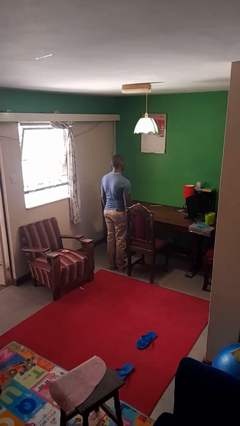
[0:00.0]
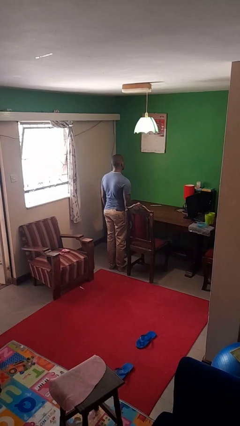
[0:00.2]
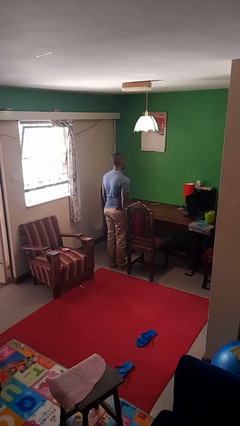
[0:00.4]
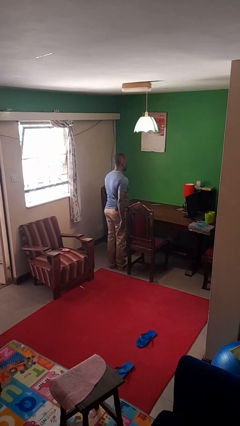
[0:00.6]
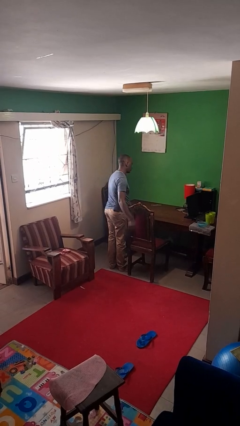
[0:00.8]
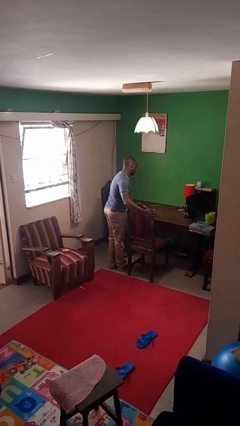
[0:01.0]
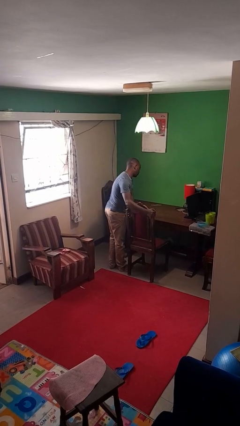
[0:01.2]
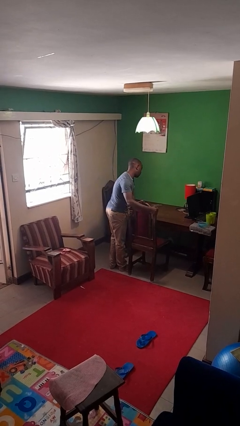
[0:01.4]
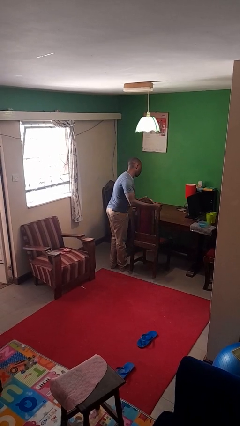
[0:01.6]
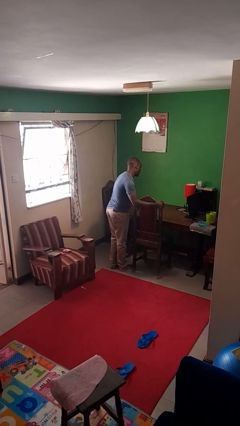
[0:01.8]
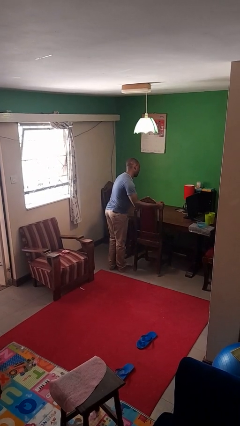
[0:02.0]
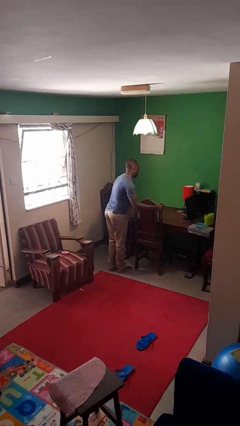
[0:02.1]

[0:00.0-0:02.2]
person pushes in chair

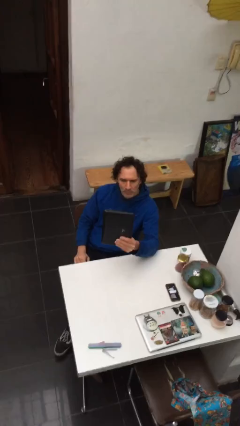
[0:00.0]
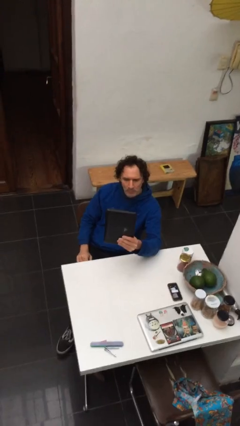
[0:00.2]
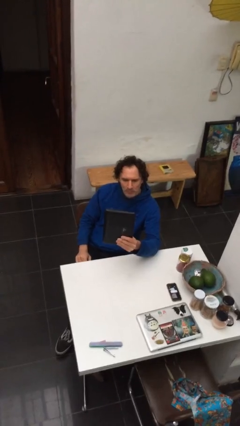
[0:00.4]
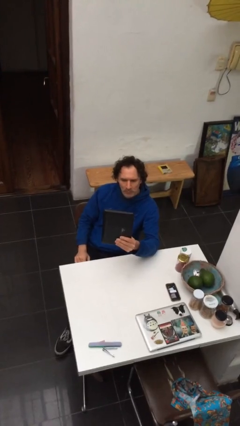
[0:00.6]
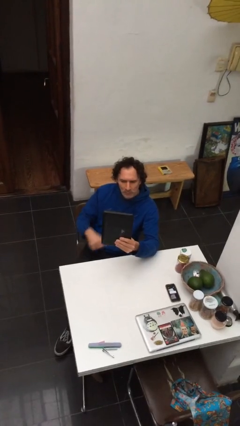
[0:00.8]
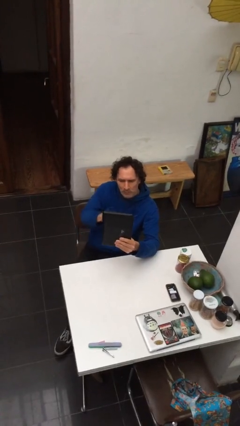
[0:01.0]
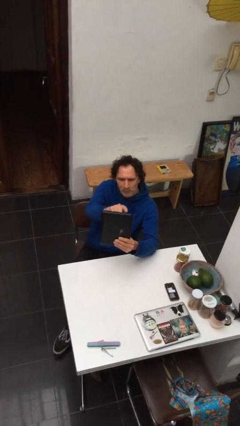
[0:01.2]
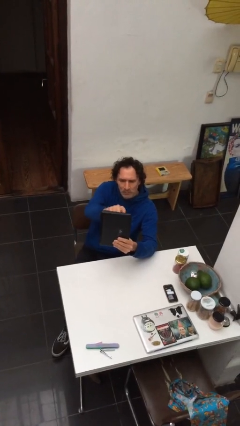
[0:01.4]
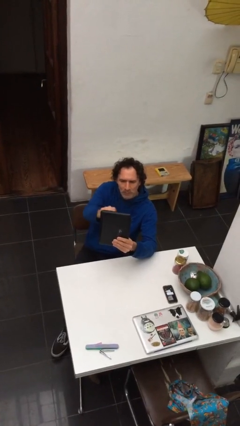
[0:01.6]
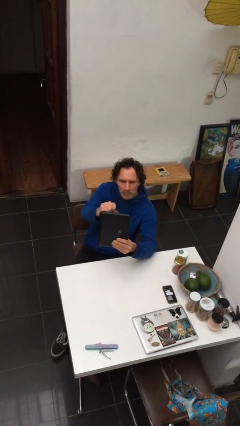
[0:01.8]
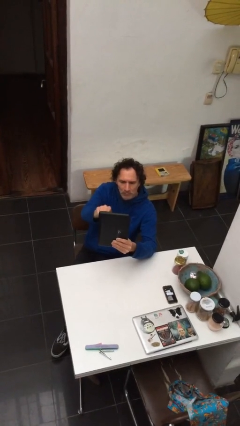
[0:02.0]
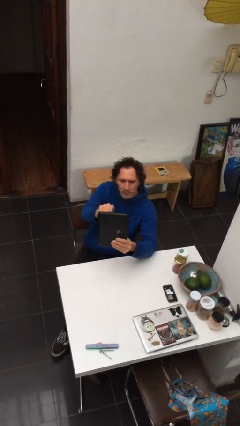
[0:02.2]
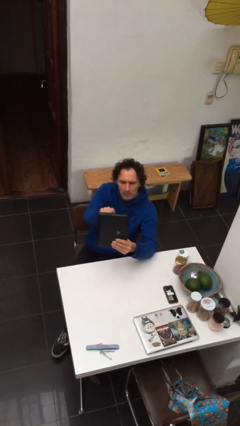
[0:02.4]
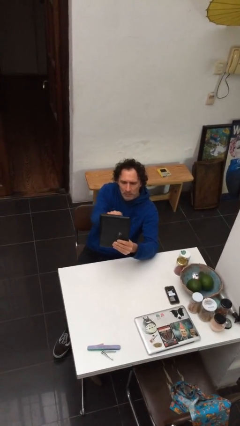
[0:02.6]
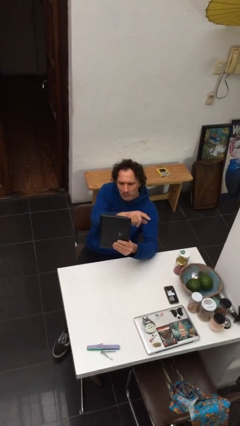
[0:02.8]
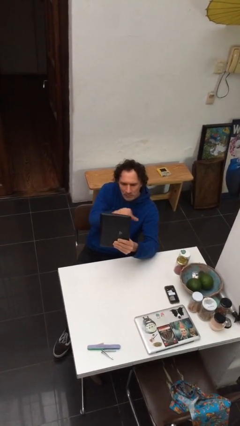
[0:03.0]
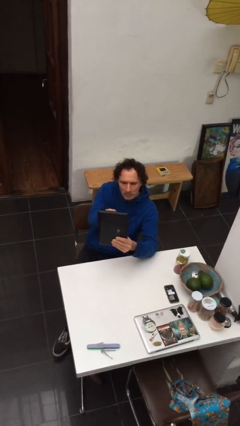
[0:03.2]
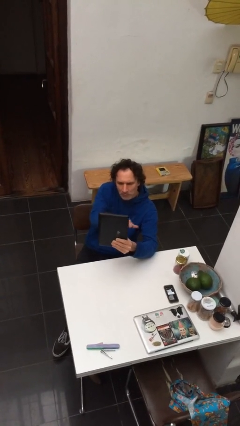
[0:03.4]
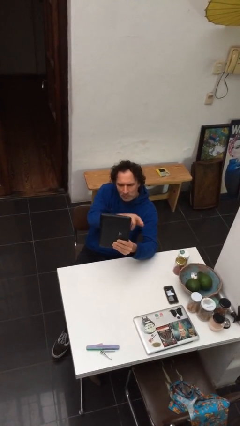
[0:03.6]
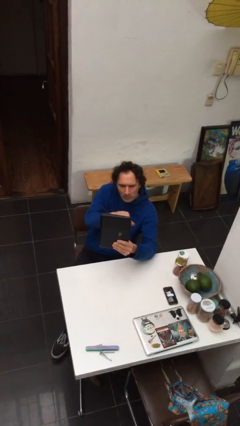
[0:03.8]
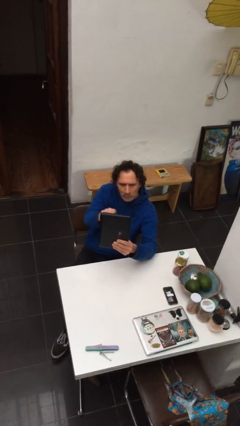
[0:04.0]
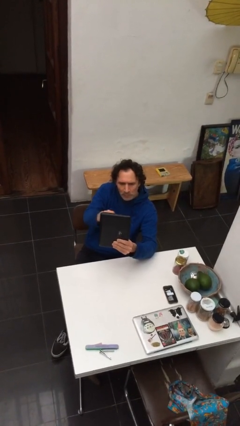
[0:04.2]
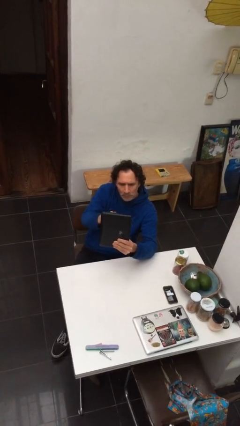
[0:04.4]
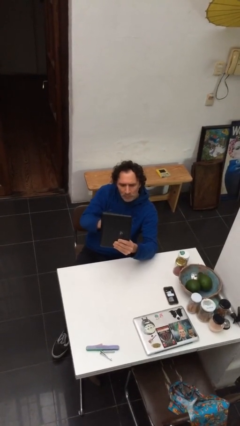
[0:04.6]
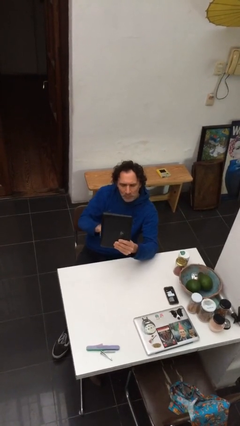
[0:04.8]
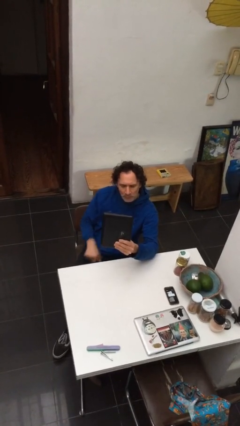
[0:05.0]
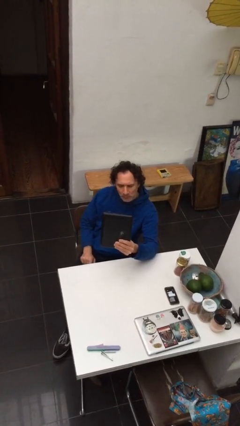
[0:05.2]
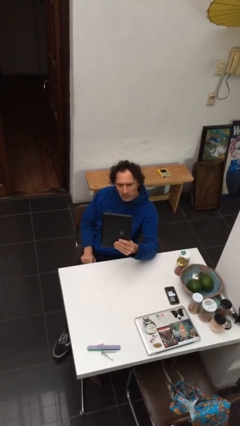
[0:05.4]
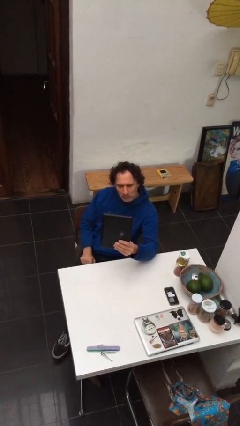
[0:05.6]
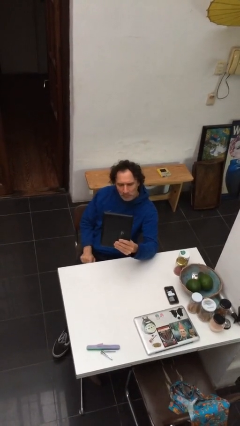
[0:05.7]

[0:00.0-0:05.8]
person interacts with tablet

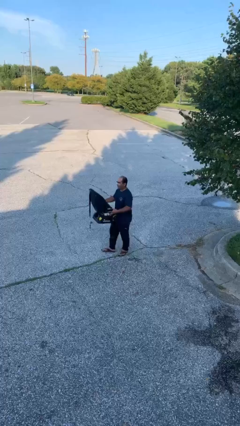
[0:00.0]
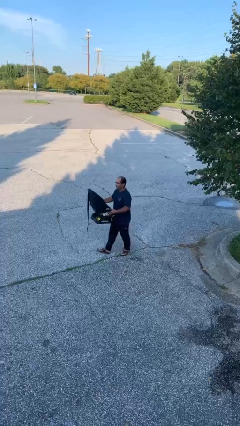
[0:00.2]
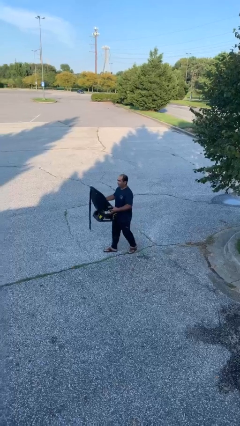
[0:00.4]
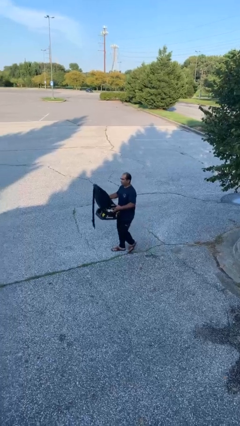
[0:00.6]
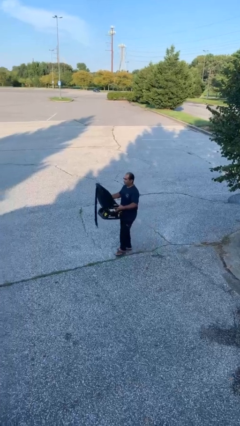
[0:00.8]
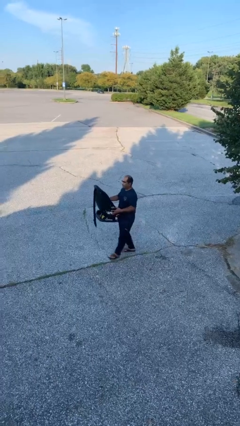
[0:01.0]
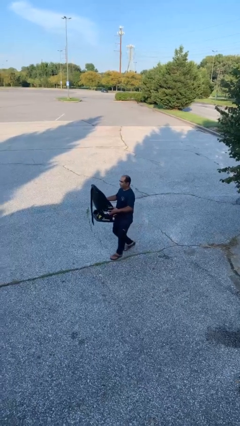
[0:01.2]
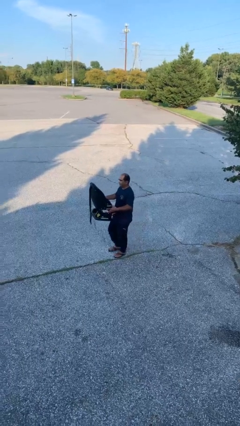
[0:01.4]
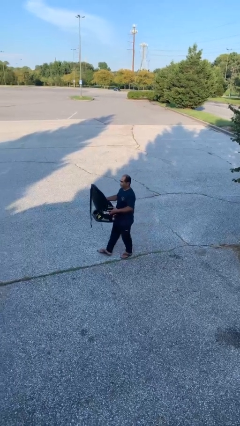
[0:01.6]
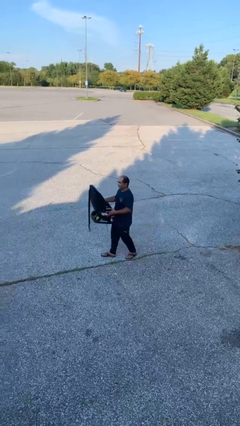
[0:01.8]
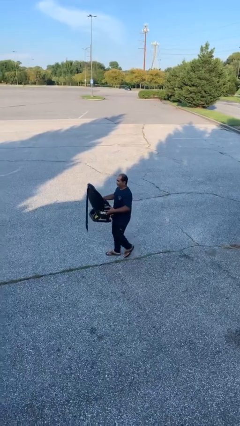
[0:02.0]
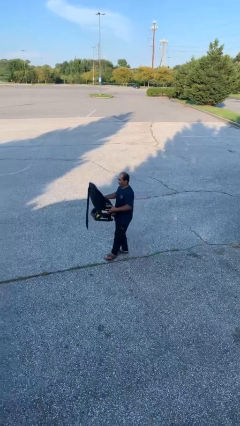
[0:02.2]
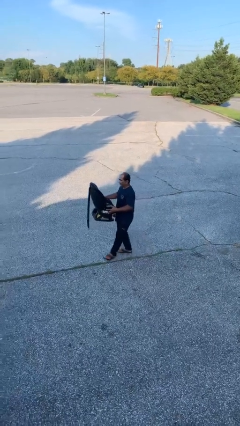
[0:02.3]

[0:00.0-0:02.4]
person carries heavy object

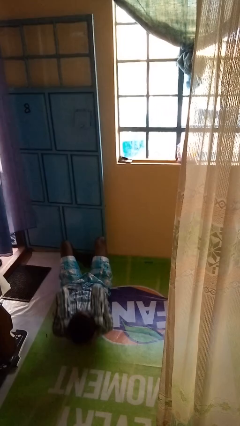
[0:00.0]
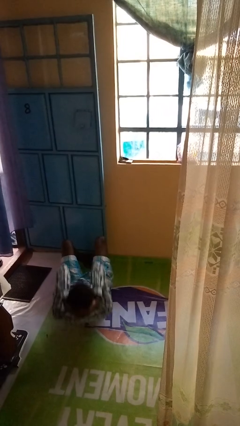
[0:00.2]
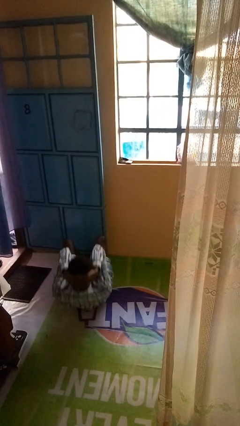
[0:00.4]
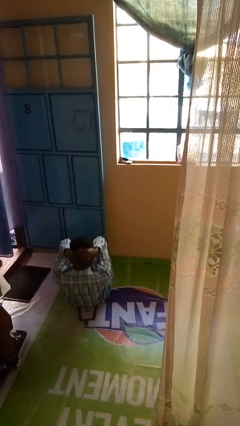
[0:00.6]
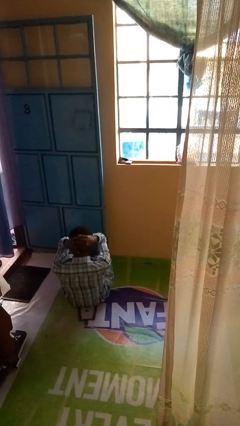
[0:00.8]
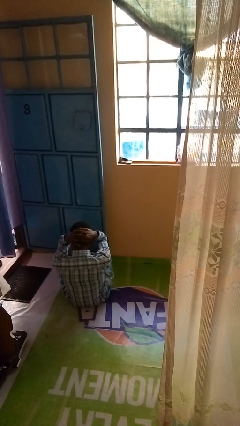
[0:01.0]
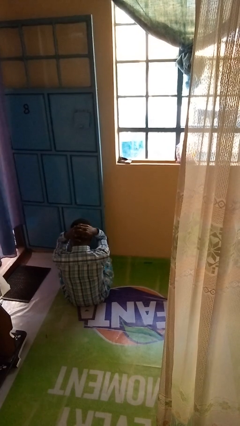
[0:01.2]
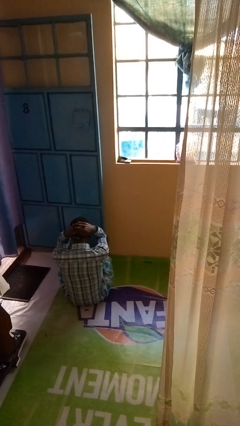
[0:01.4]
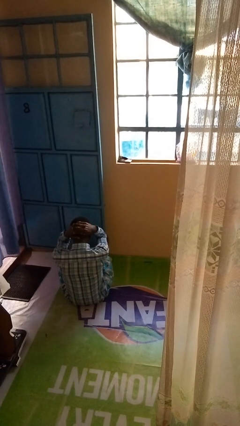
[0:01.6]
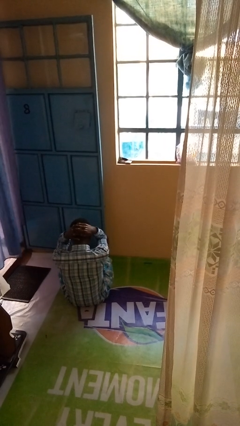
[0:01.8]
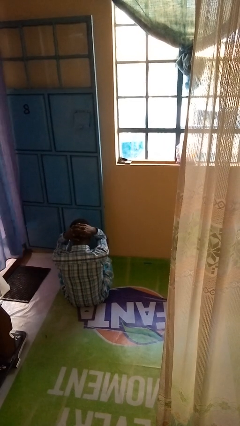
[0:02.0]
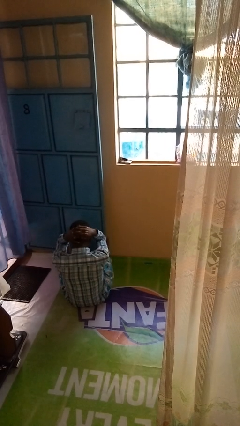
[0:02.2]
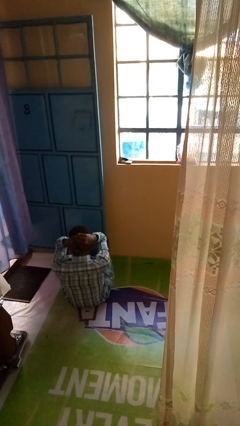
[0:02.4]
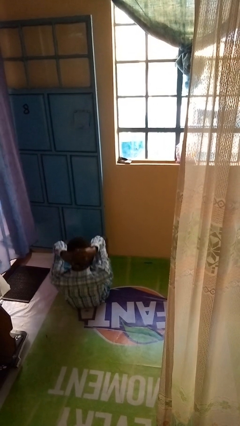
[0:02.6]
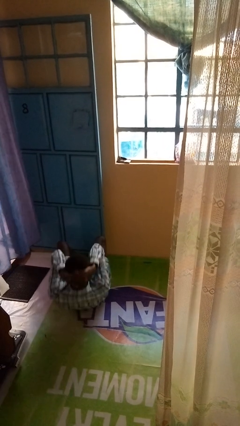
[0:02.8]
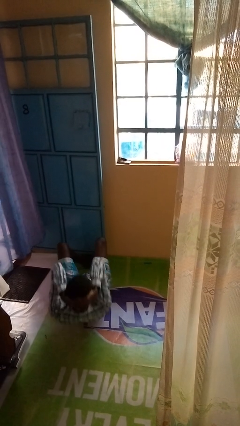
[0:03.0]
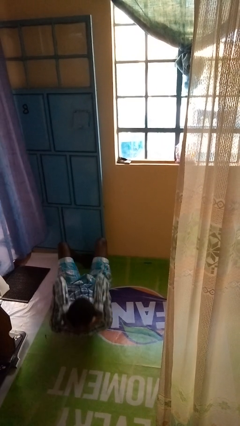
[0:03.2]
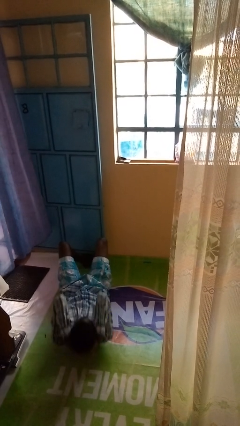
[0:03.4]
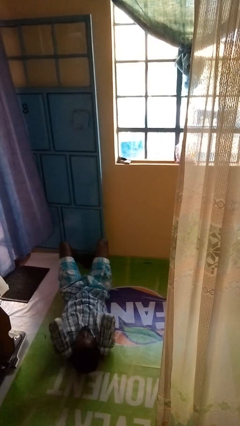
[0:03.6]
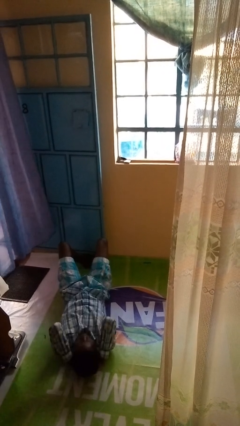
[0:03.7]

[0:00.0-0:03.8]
person exercises with situp

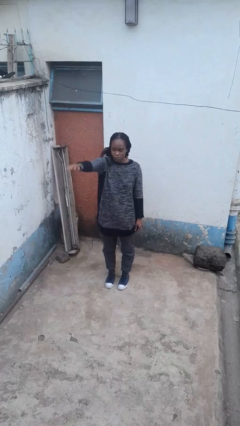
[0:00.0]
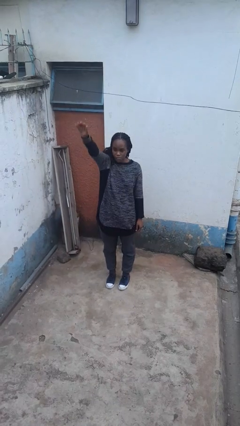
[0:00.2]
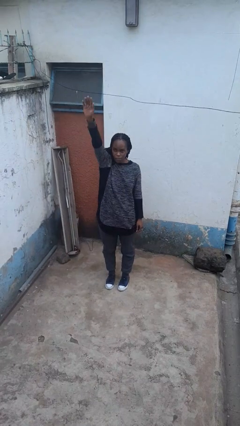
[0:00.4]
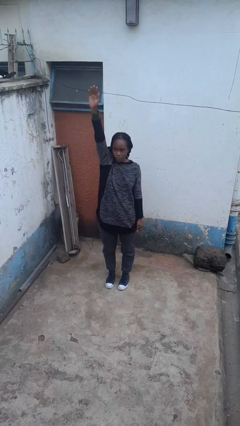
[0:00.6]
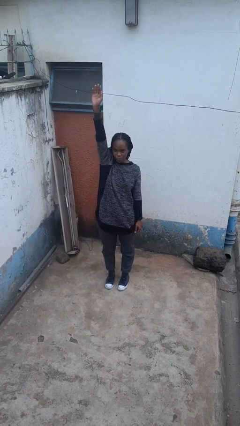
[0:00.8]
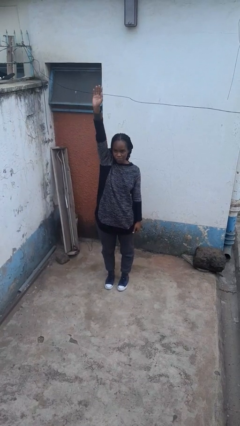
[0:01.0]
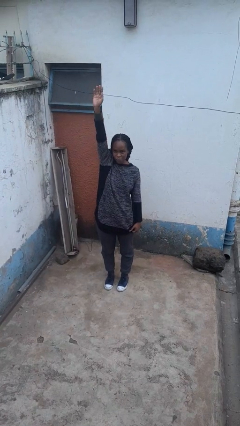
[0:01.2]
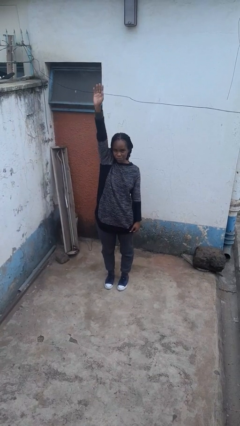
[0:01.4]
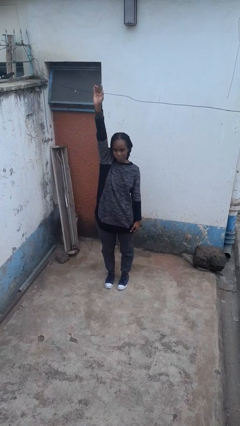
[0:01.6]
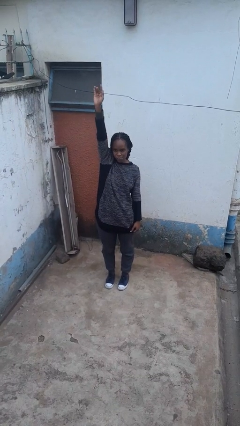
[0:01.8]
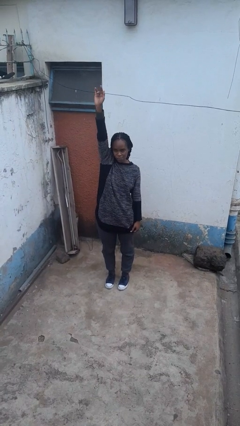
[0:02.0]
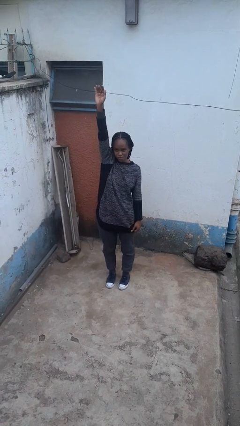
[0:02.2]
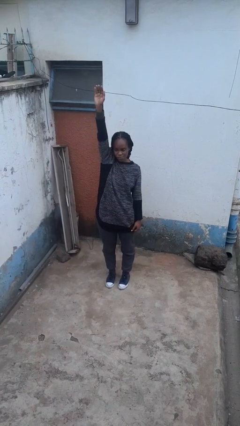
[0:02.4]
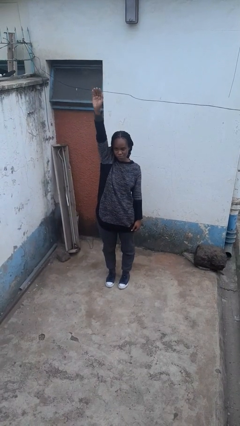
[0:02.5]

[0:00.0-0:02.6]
person gestures raise hand

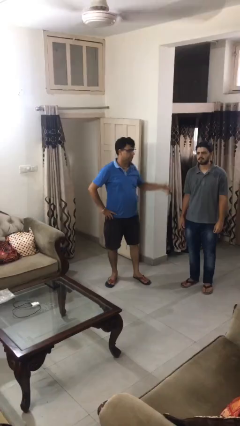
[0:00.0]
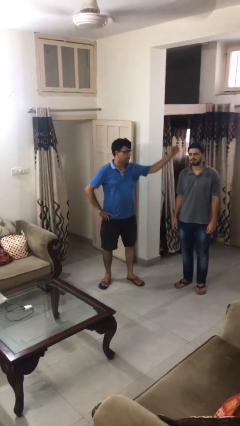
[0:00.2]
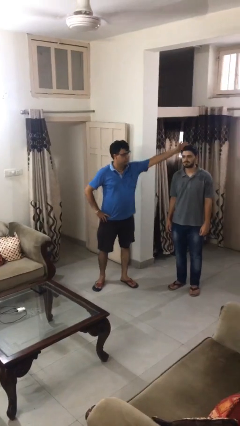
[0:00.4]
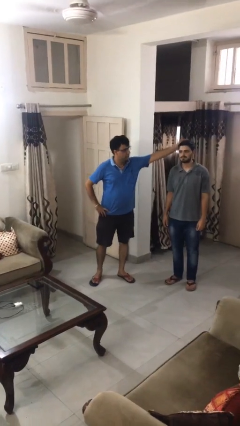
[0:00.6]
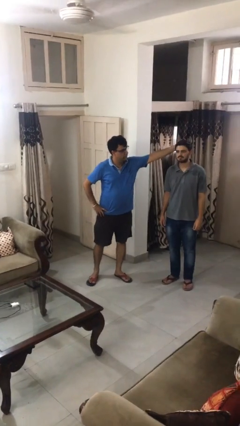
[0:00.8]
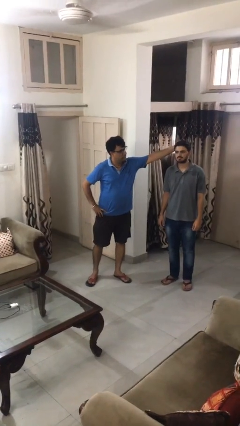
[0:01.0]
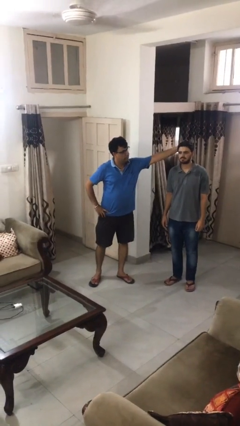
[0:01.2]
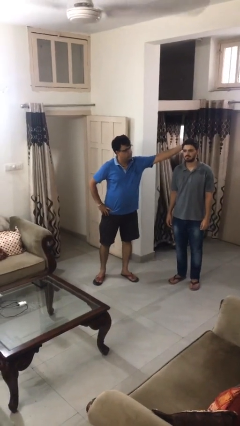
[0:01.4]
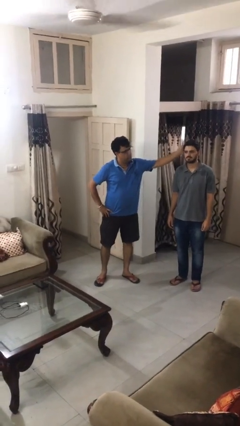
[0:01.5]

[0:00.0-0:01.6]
person grabs person by hair
